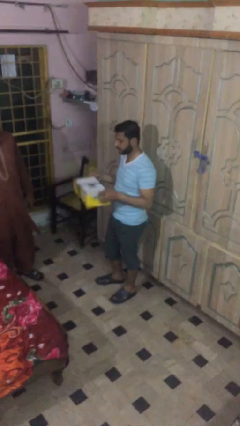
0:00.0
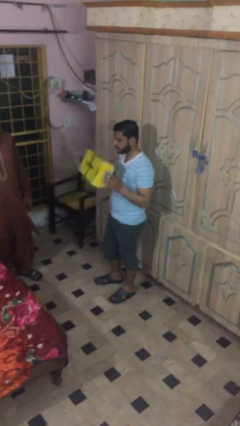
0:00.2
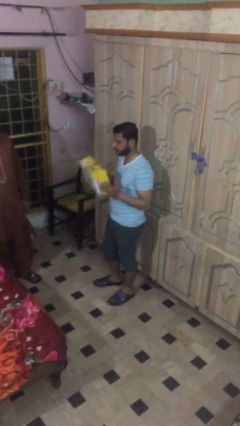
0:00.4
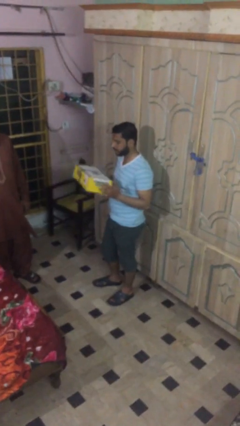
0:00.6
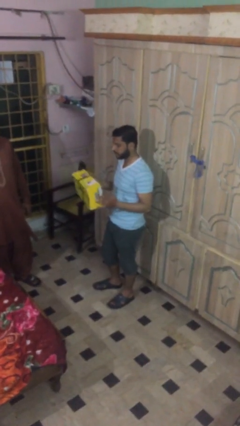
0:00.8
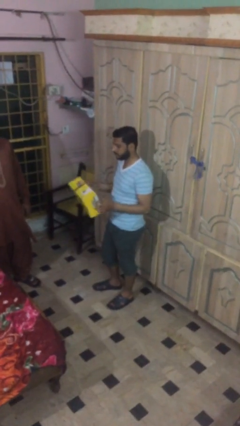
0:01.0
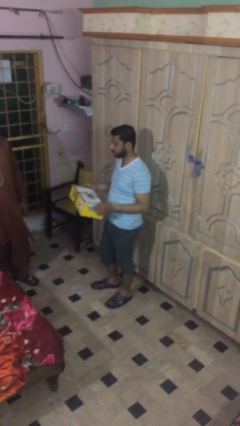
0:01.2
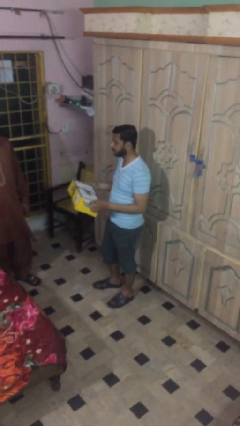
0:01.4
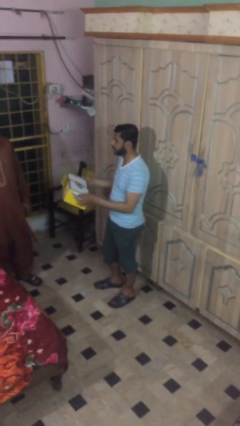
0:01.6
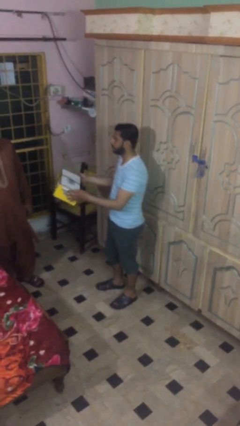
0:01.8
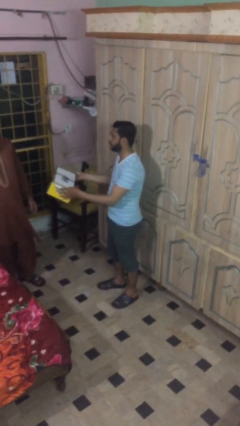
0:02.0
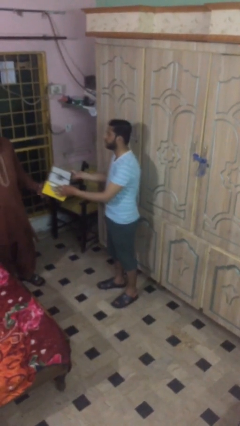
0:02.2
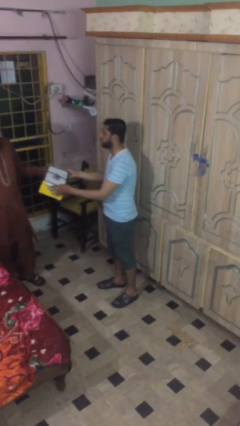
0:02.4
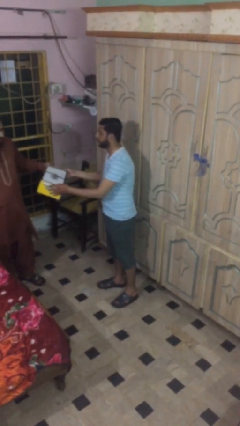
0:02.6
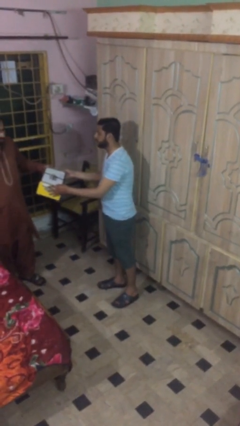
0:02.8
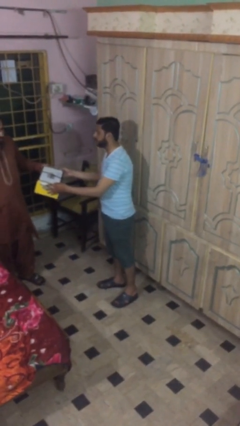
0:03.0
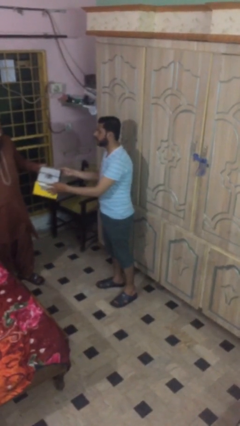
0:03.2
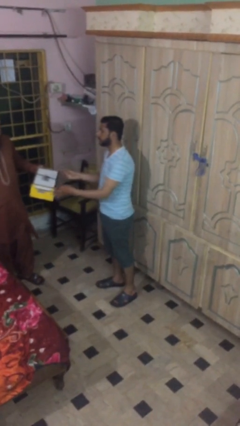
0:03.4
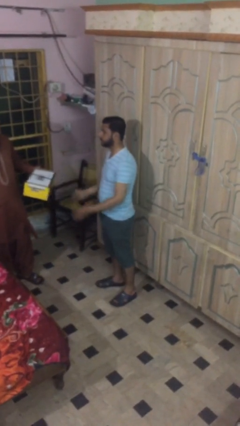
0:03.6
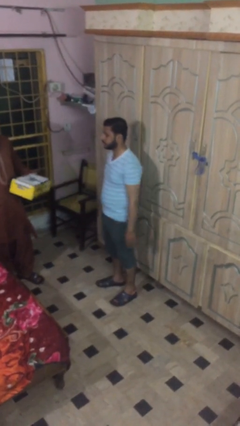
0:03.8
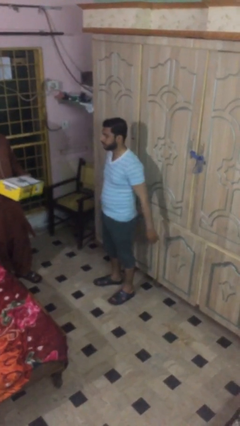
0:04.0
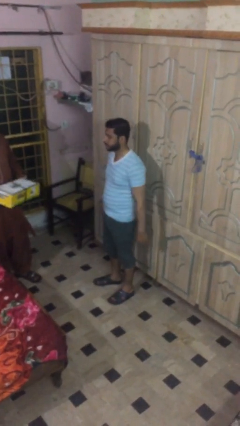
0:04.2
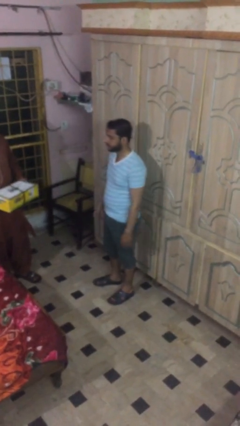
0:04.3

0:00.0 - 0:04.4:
person transfers object to person

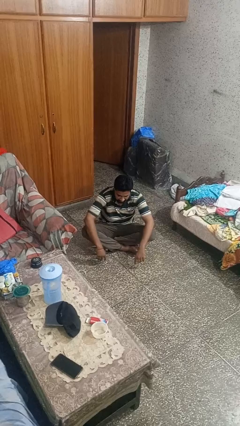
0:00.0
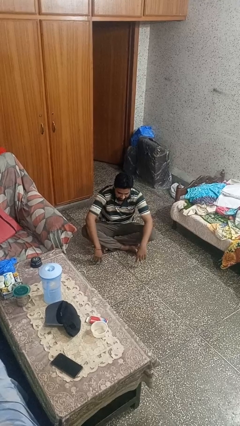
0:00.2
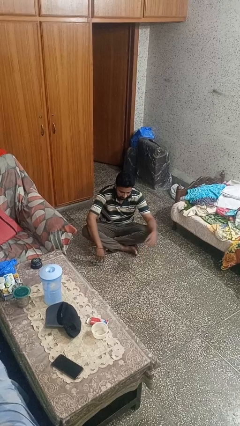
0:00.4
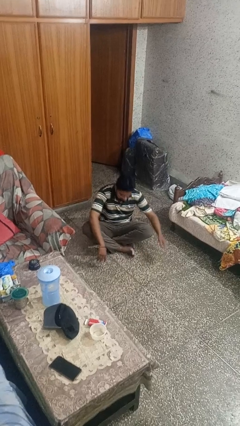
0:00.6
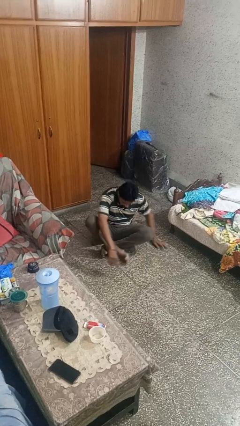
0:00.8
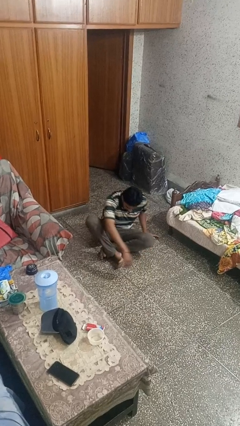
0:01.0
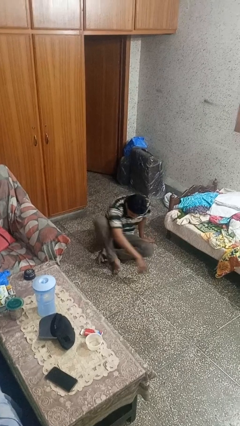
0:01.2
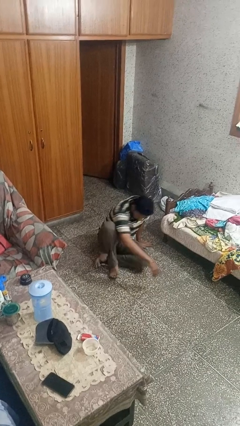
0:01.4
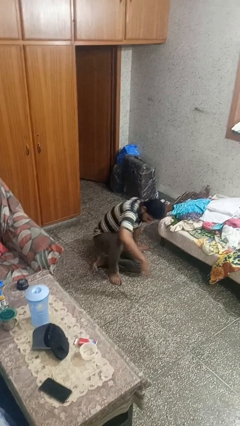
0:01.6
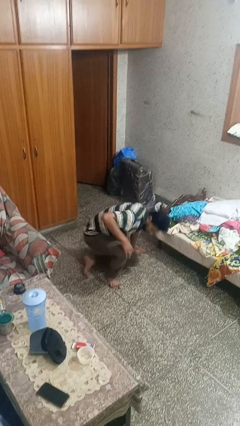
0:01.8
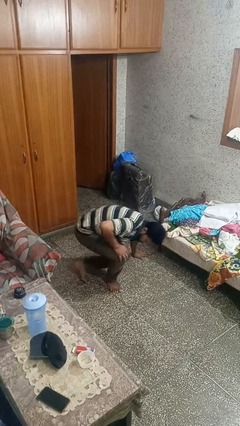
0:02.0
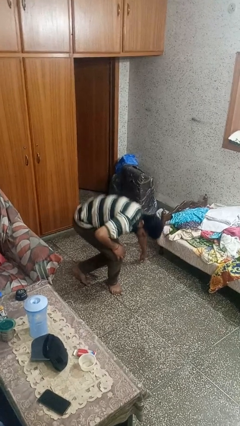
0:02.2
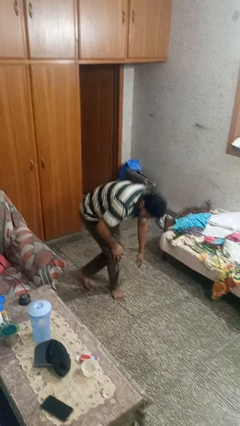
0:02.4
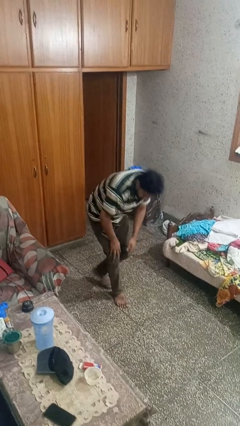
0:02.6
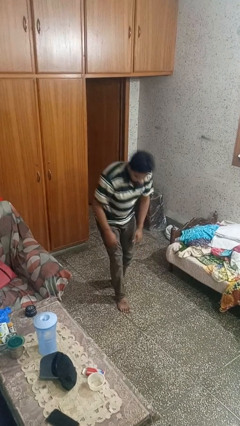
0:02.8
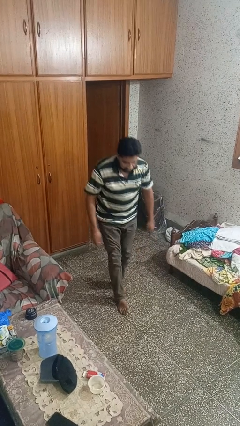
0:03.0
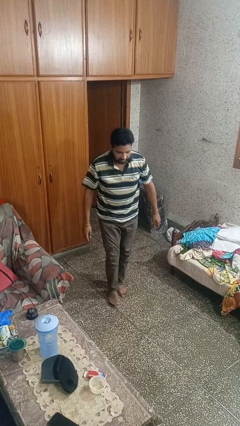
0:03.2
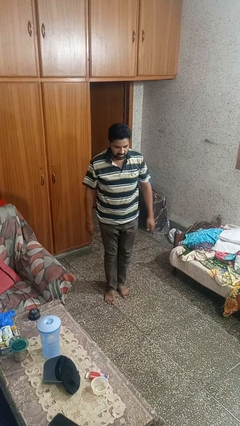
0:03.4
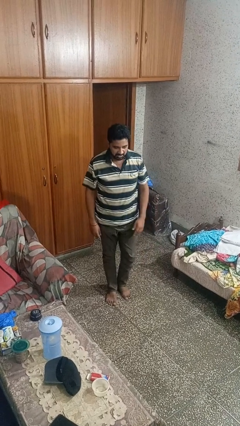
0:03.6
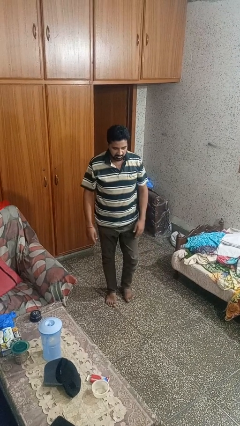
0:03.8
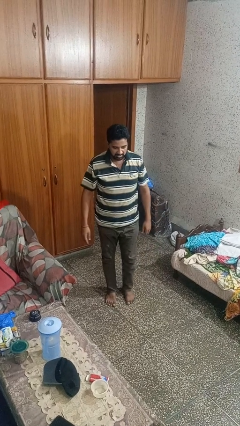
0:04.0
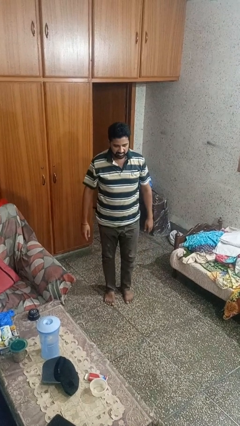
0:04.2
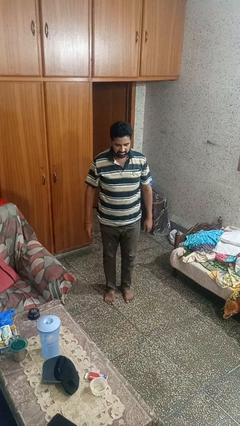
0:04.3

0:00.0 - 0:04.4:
person stands up from floor

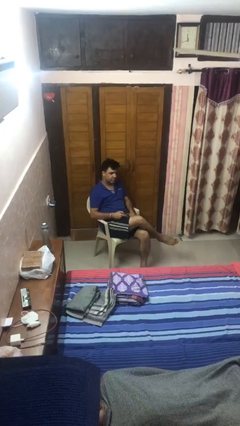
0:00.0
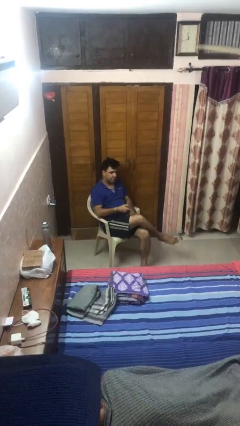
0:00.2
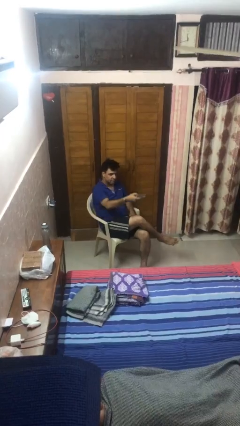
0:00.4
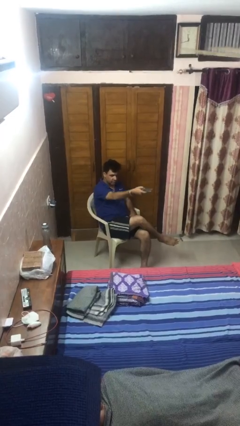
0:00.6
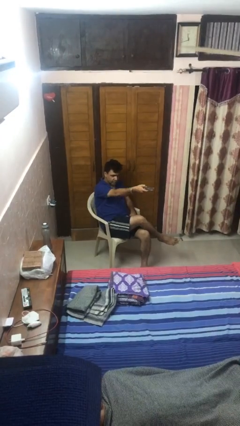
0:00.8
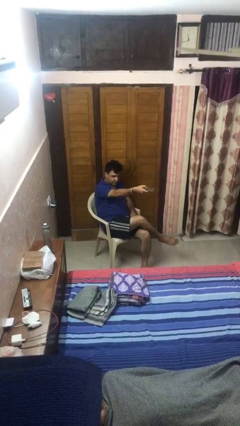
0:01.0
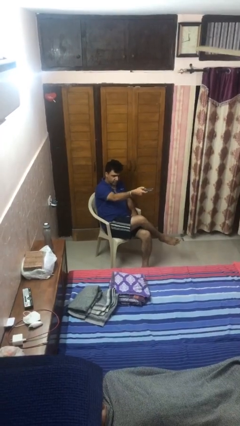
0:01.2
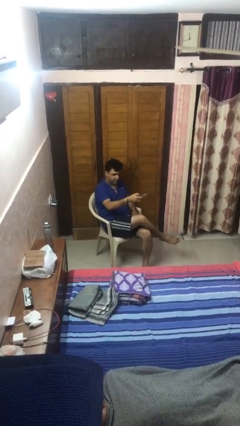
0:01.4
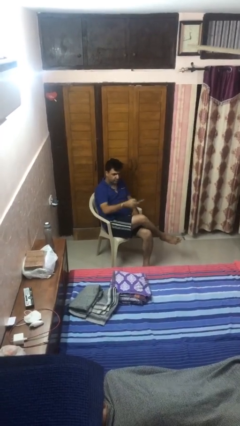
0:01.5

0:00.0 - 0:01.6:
person uses television remote

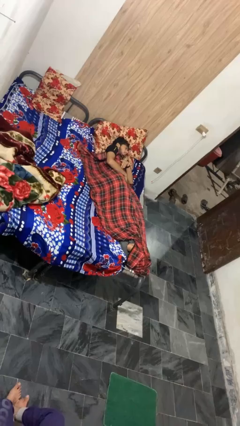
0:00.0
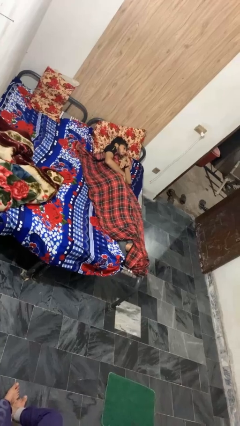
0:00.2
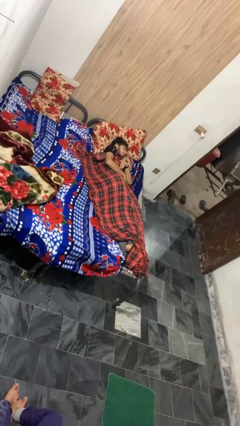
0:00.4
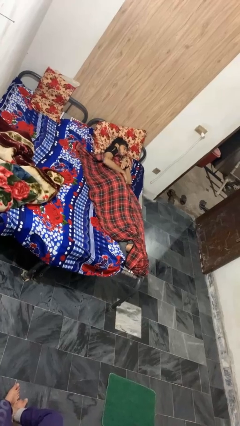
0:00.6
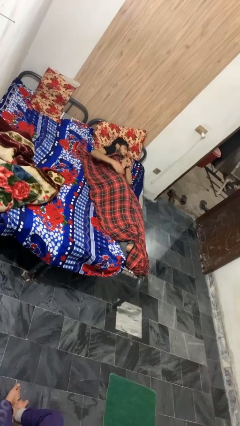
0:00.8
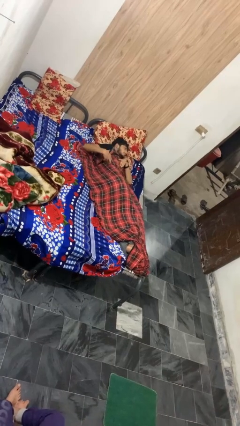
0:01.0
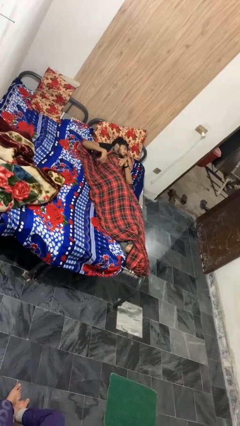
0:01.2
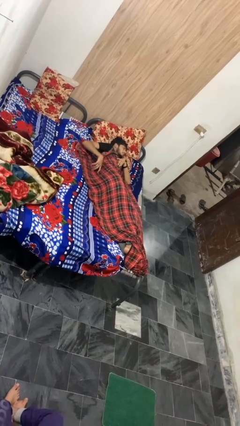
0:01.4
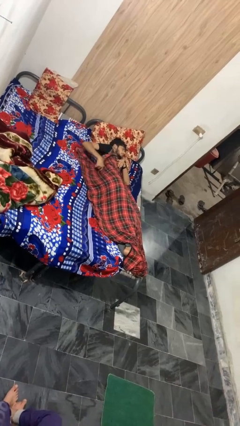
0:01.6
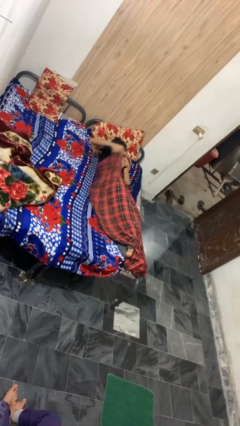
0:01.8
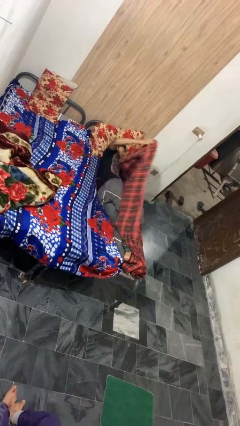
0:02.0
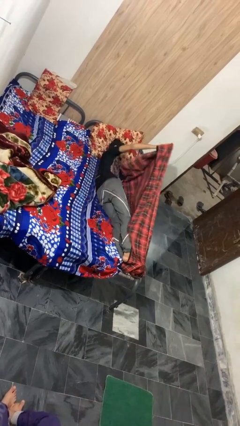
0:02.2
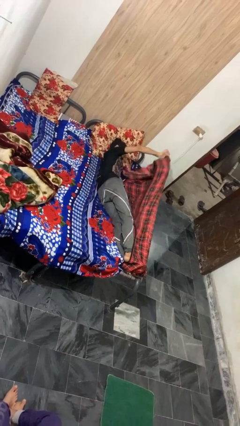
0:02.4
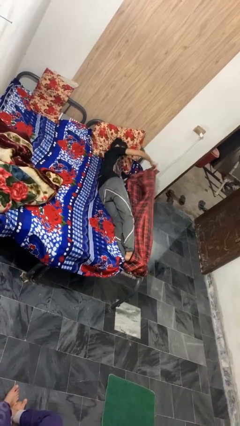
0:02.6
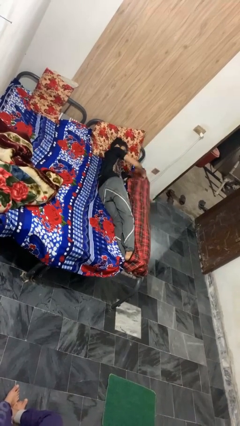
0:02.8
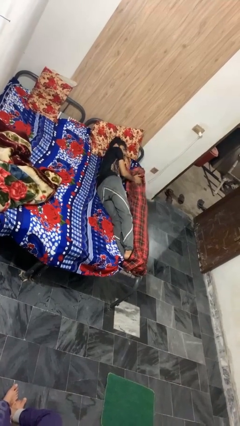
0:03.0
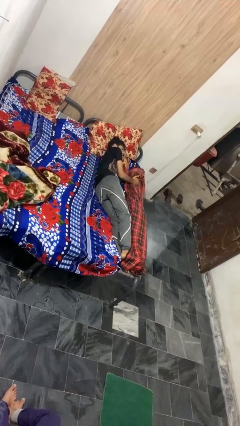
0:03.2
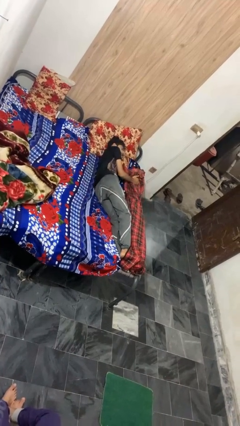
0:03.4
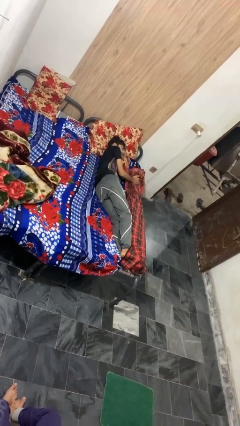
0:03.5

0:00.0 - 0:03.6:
person uncovers with blanket

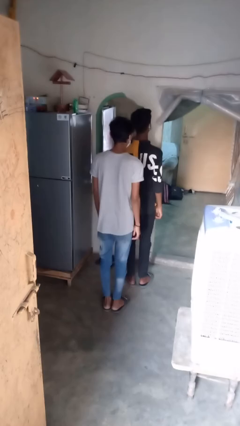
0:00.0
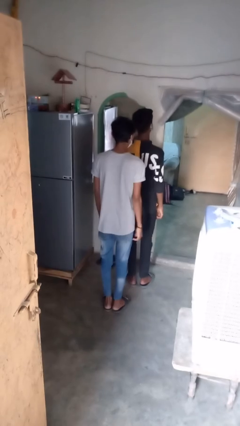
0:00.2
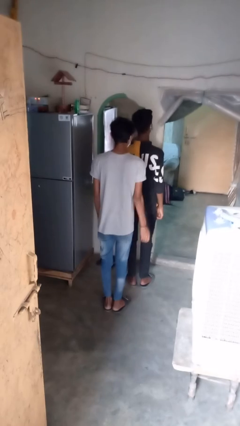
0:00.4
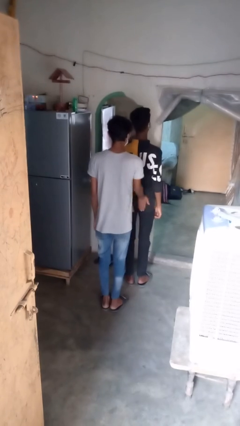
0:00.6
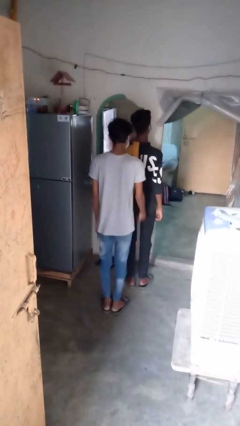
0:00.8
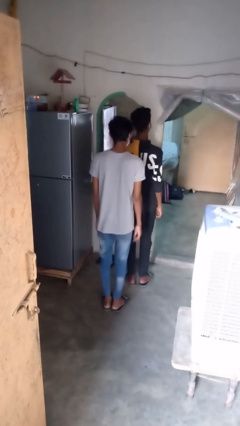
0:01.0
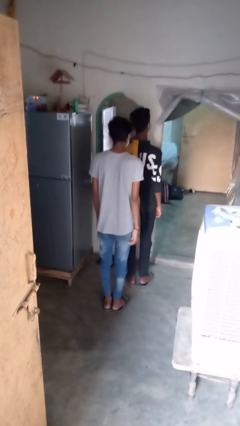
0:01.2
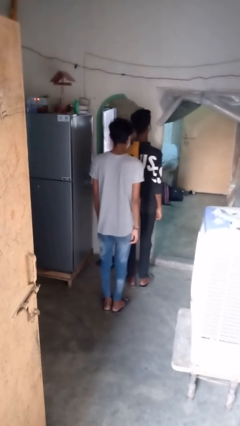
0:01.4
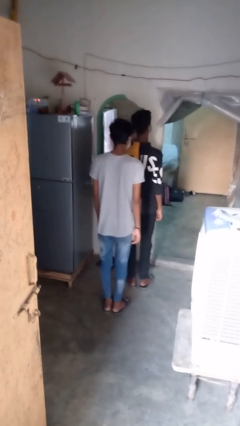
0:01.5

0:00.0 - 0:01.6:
person bumps into person

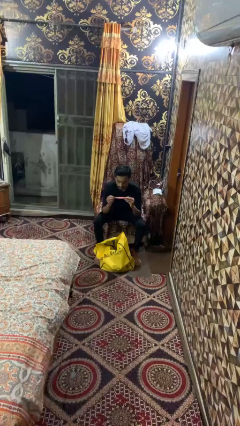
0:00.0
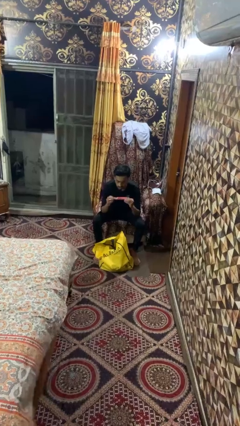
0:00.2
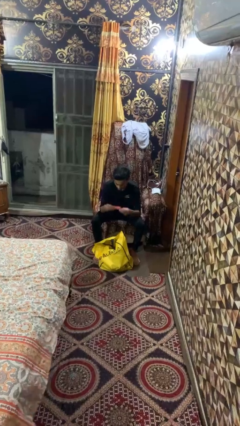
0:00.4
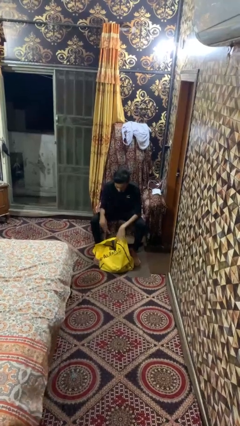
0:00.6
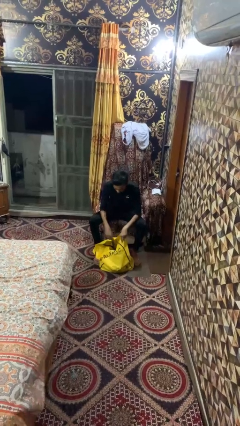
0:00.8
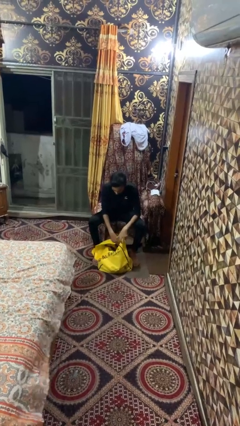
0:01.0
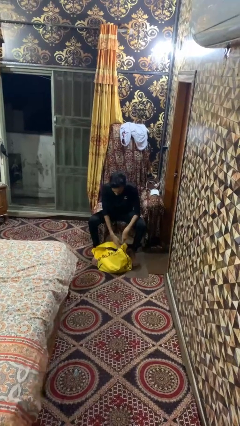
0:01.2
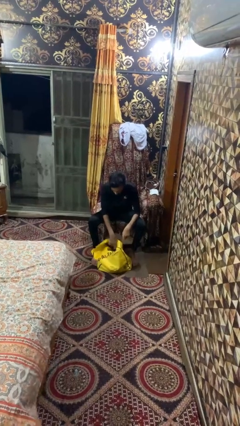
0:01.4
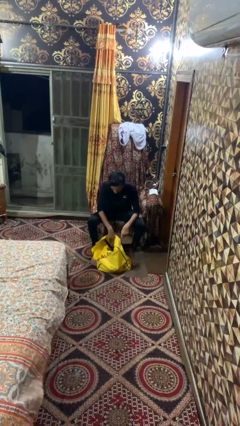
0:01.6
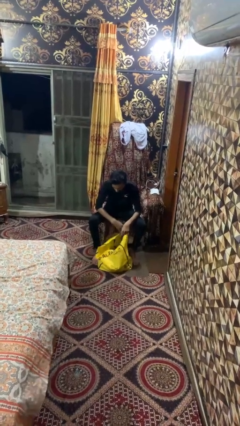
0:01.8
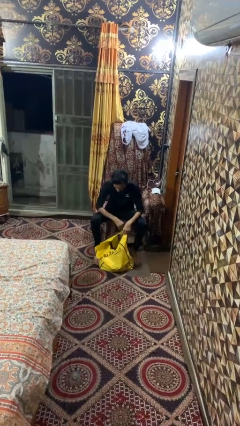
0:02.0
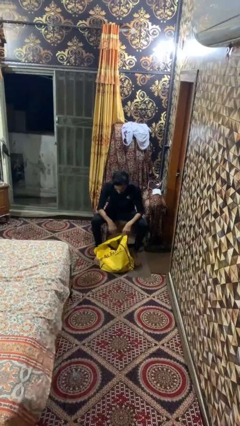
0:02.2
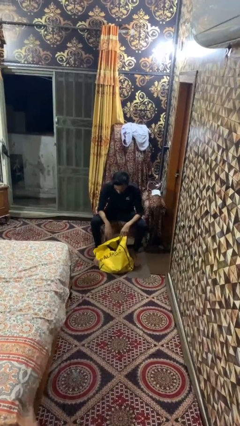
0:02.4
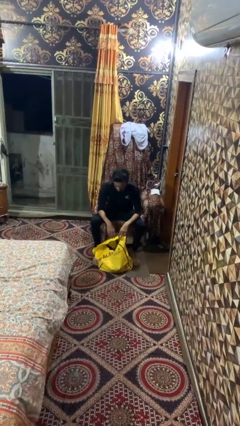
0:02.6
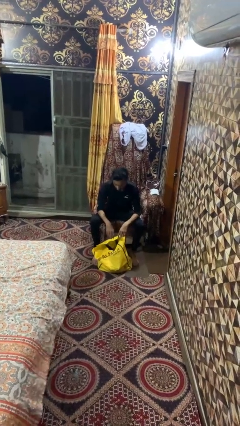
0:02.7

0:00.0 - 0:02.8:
person puts object into bag
